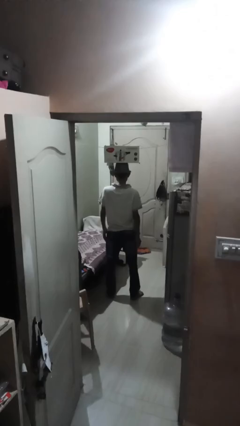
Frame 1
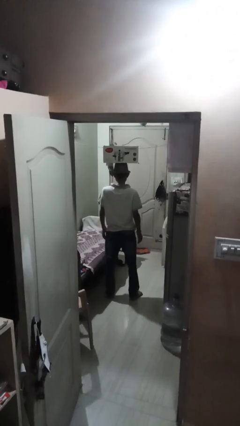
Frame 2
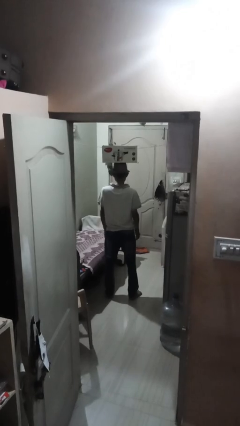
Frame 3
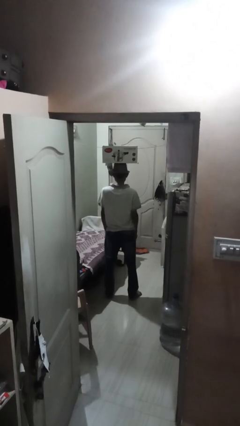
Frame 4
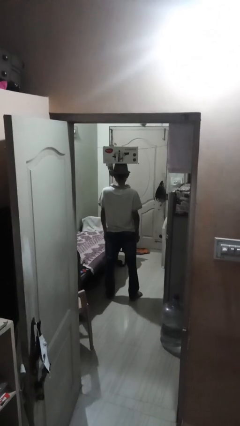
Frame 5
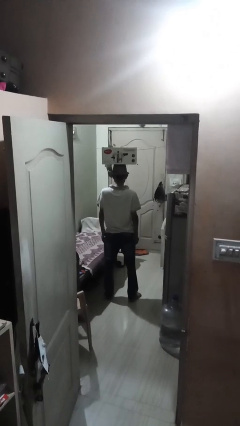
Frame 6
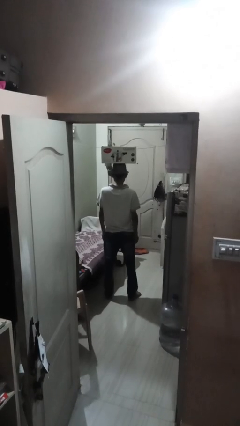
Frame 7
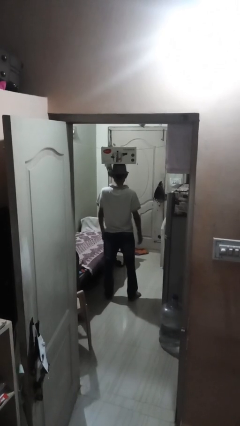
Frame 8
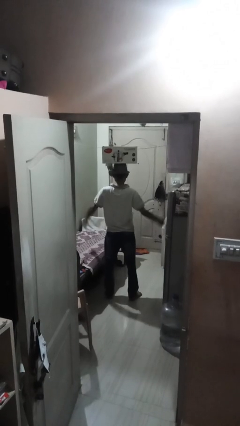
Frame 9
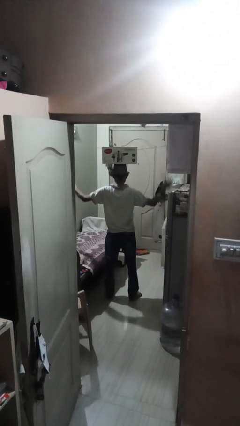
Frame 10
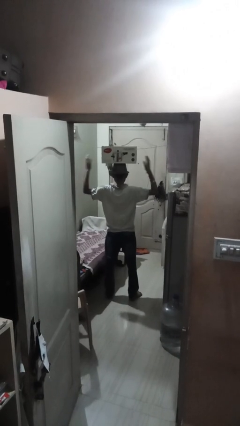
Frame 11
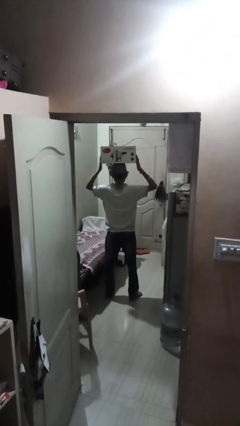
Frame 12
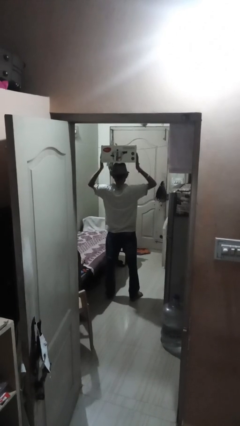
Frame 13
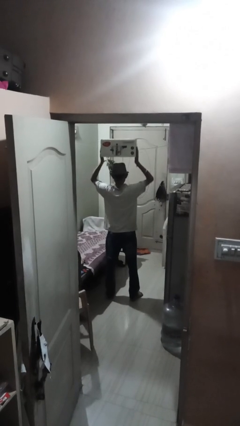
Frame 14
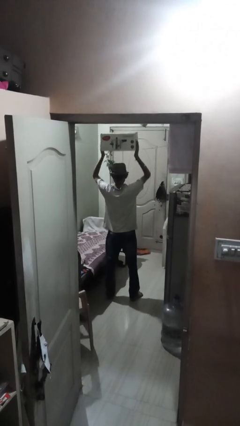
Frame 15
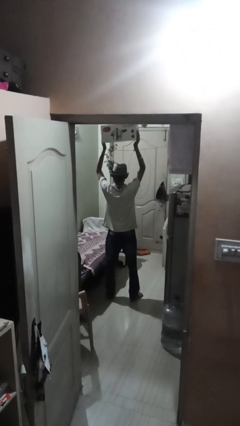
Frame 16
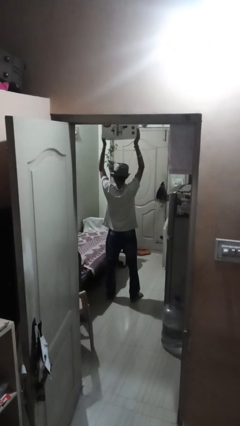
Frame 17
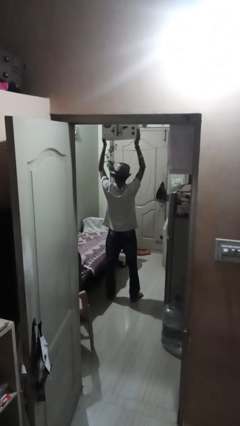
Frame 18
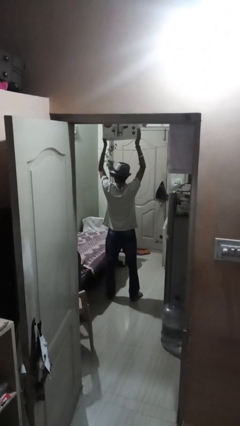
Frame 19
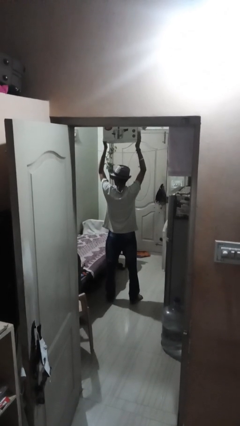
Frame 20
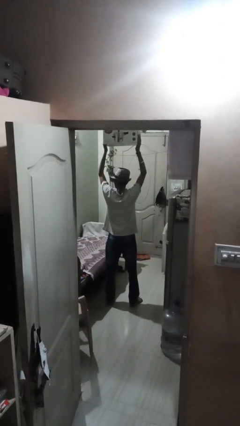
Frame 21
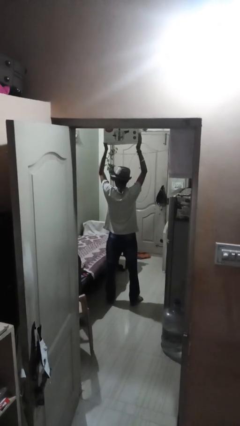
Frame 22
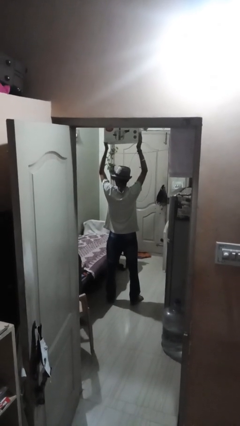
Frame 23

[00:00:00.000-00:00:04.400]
person holds object above head

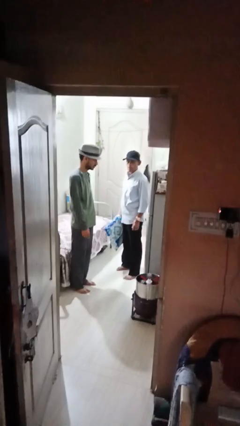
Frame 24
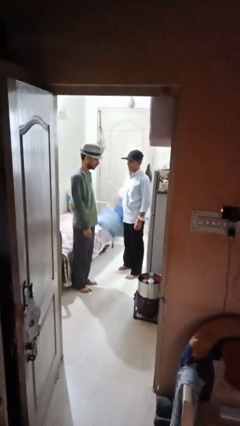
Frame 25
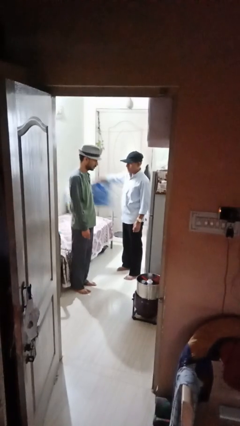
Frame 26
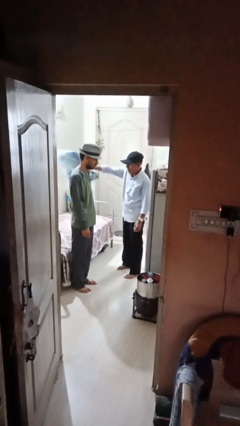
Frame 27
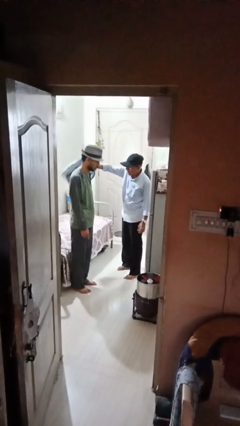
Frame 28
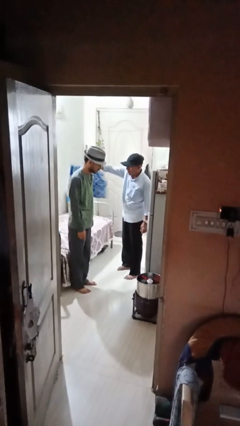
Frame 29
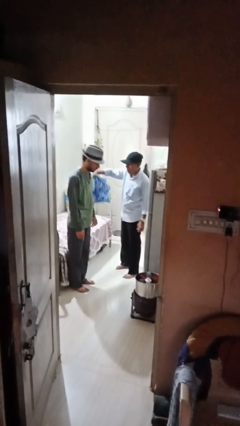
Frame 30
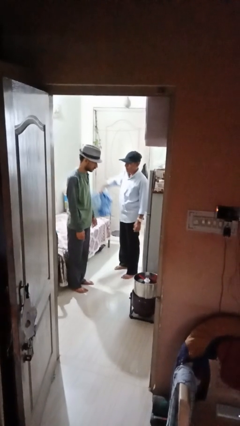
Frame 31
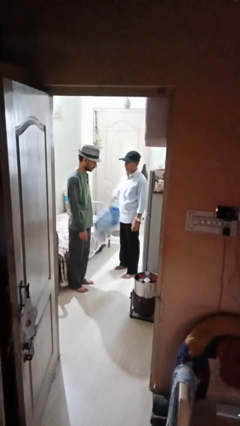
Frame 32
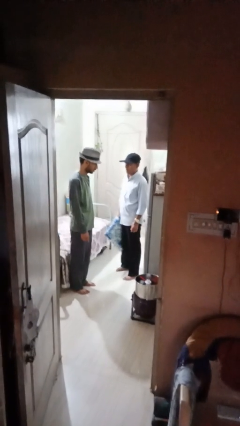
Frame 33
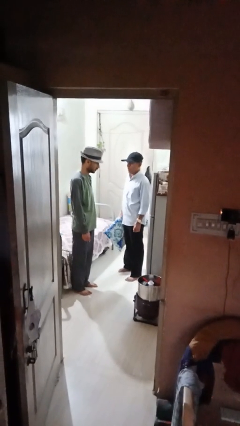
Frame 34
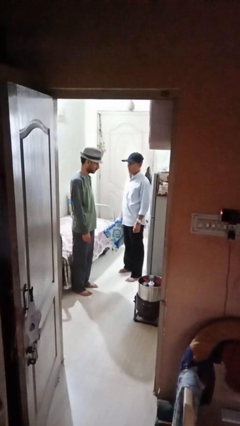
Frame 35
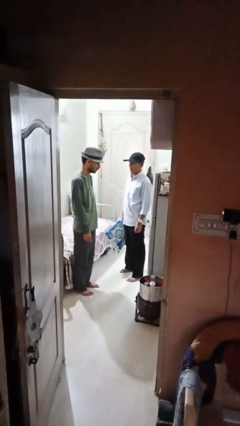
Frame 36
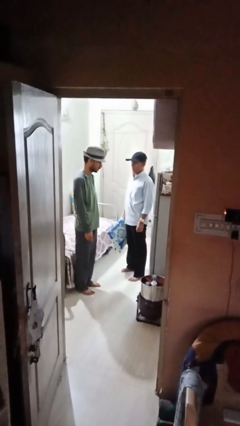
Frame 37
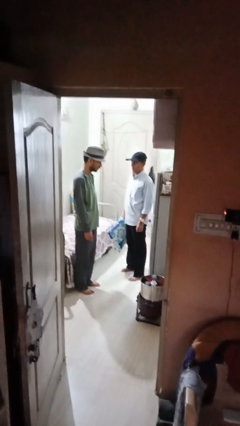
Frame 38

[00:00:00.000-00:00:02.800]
person hits person with pillow

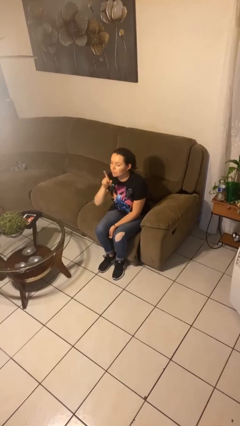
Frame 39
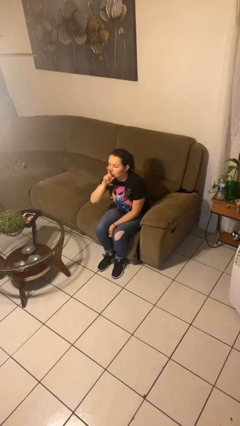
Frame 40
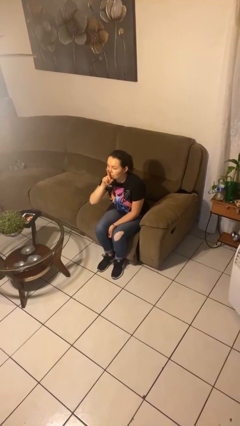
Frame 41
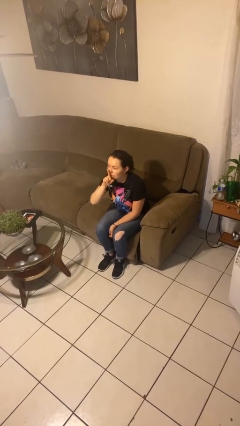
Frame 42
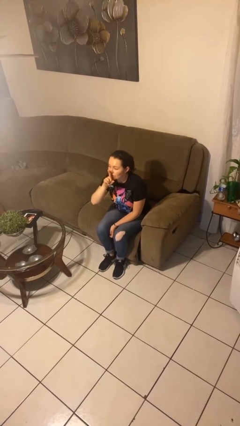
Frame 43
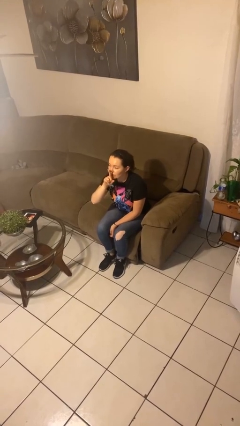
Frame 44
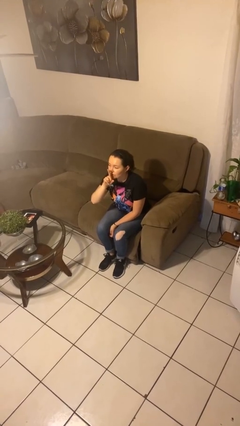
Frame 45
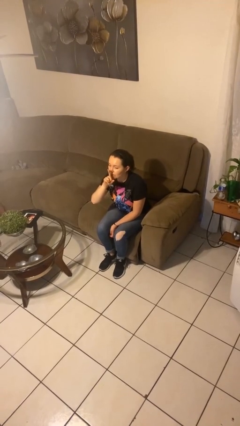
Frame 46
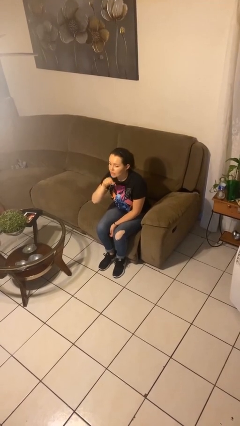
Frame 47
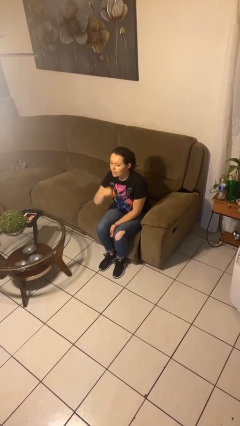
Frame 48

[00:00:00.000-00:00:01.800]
person gestures be quiet

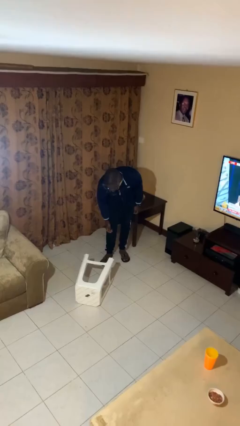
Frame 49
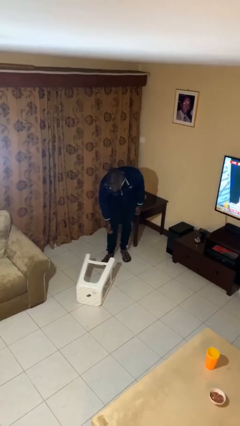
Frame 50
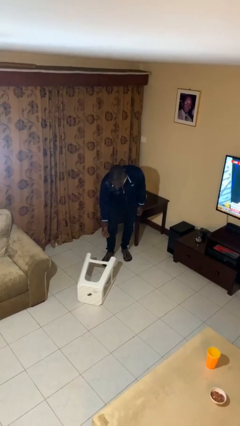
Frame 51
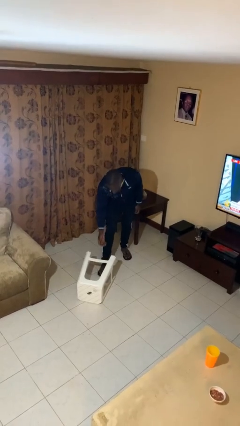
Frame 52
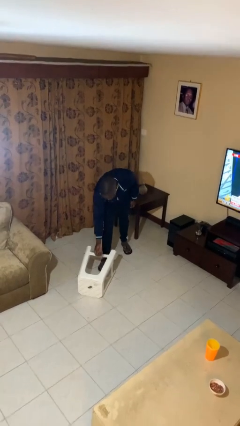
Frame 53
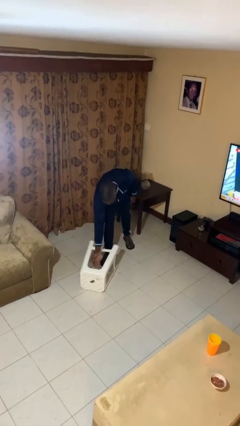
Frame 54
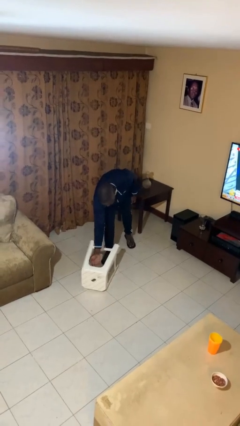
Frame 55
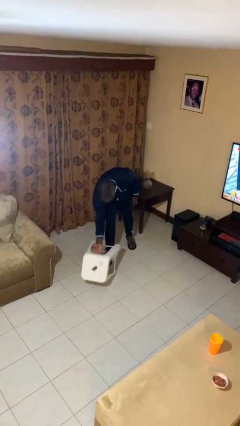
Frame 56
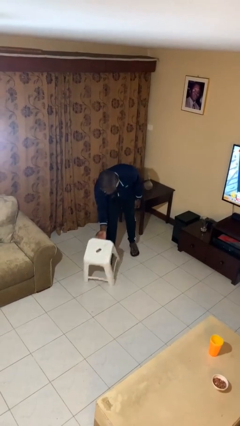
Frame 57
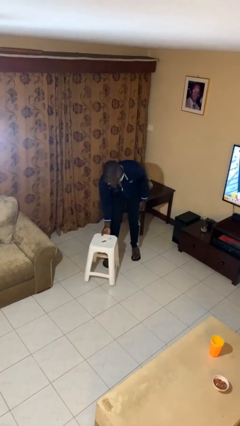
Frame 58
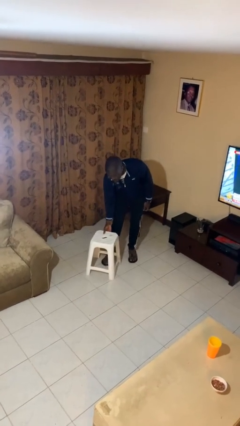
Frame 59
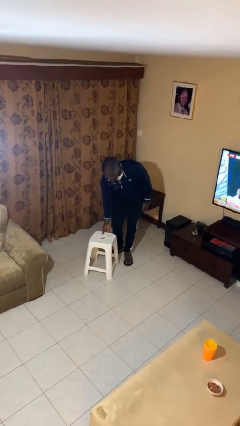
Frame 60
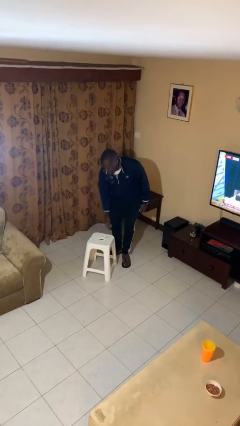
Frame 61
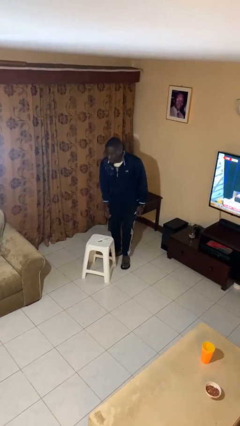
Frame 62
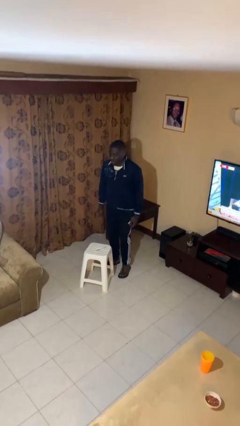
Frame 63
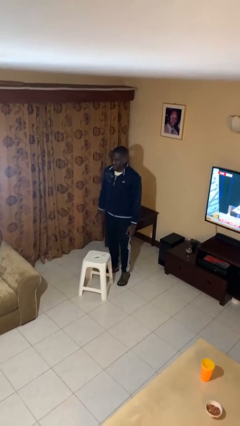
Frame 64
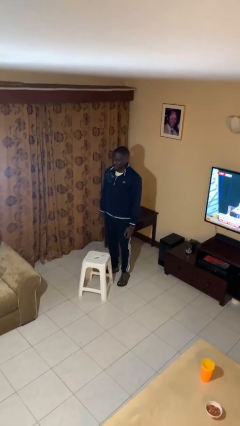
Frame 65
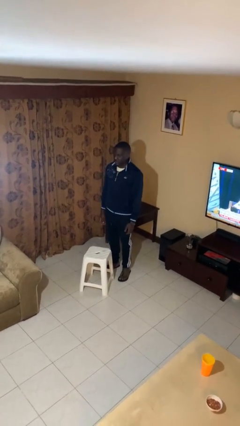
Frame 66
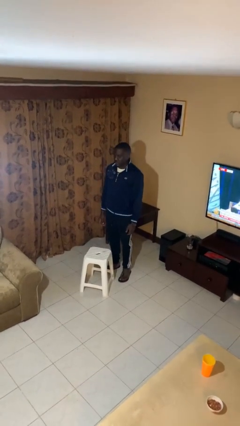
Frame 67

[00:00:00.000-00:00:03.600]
person sets upright furniture

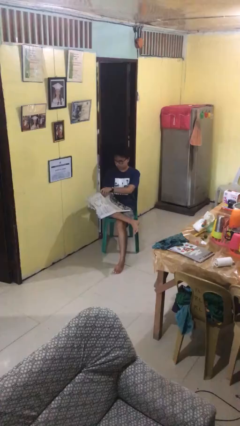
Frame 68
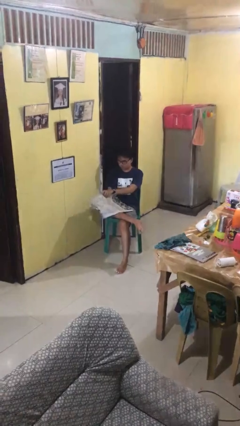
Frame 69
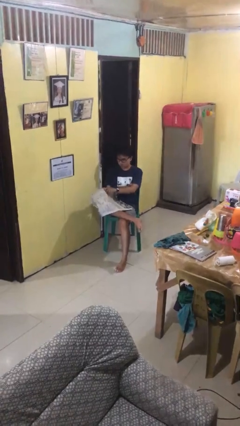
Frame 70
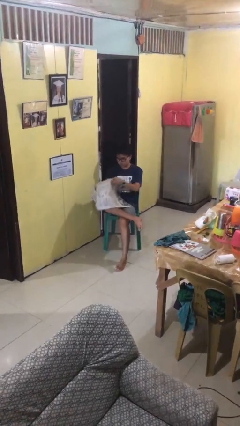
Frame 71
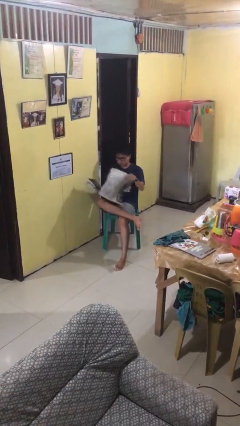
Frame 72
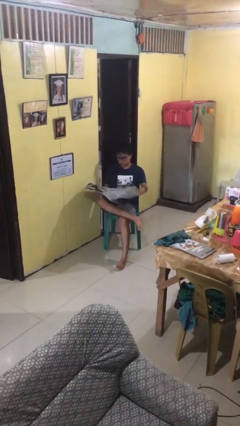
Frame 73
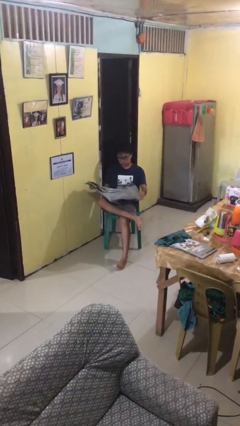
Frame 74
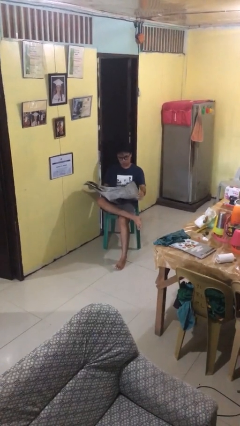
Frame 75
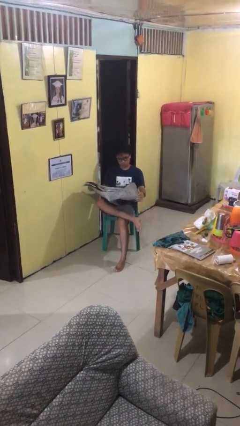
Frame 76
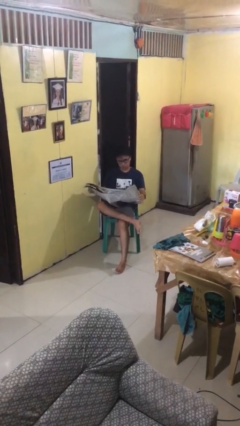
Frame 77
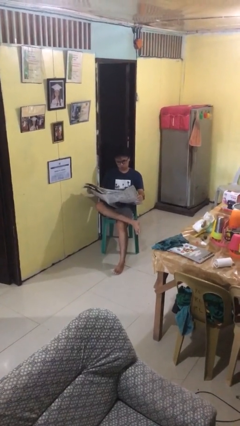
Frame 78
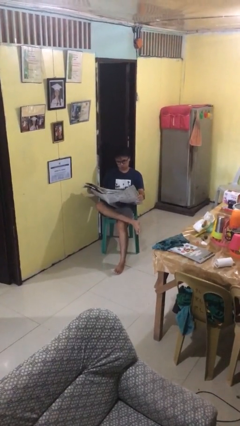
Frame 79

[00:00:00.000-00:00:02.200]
person reads newspaper

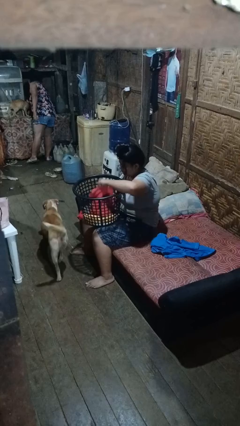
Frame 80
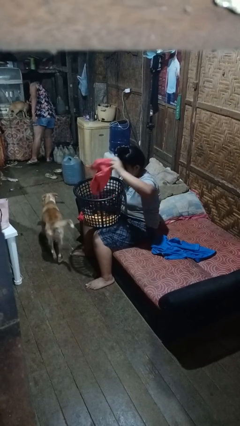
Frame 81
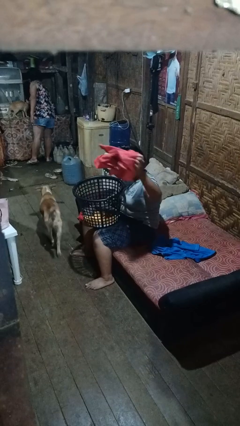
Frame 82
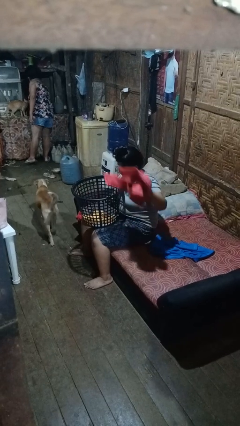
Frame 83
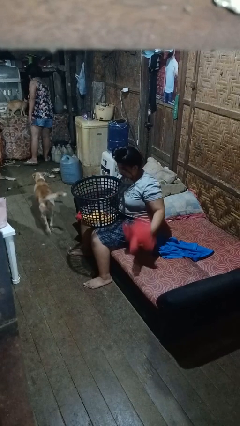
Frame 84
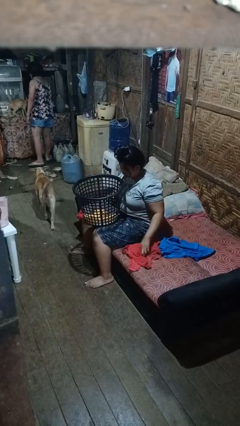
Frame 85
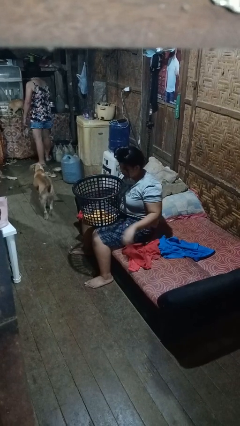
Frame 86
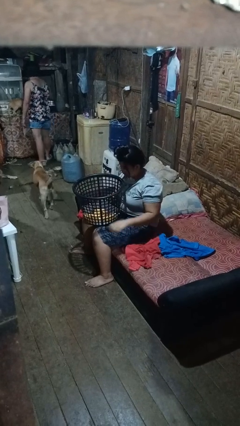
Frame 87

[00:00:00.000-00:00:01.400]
person takes object from basket

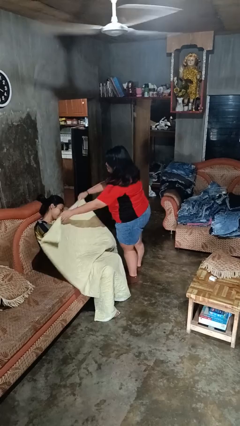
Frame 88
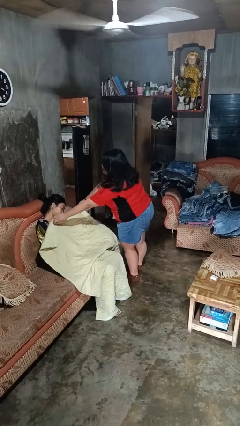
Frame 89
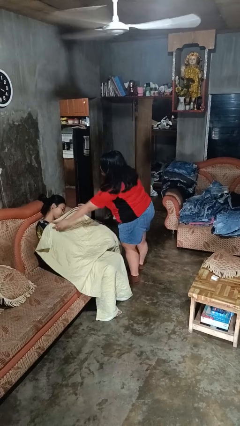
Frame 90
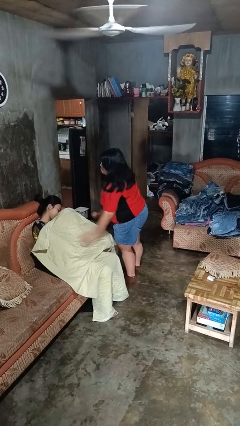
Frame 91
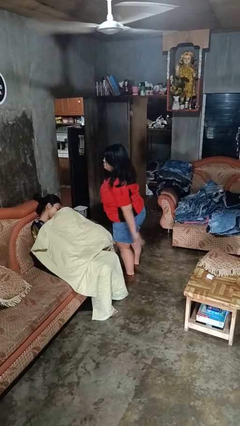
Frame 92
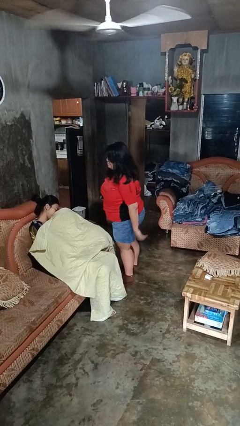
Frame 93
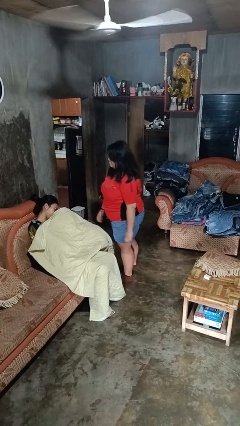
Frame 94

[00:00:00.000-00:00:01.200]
person covers friend with blanket
